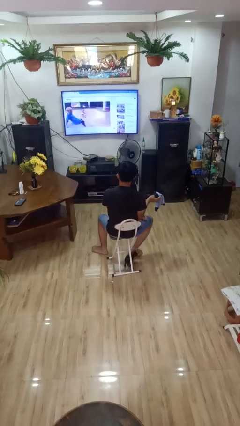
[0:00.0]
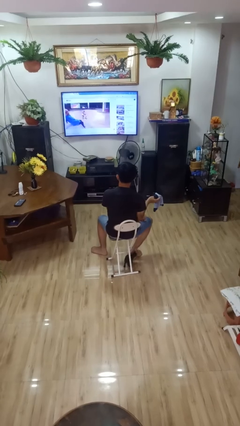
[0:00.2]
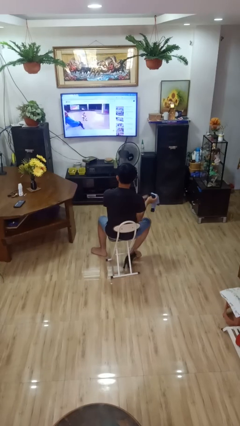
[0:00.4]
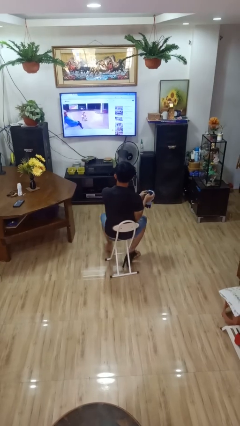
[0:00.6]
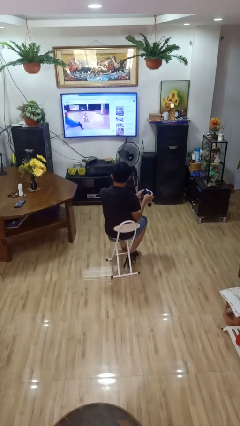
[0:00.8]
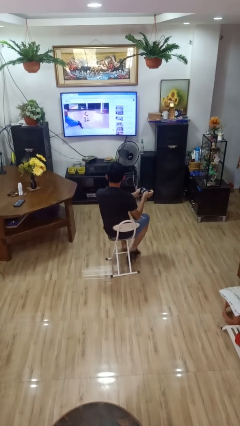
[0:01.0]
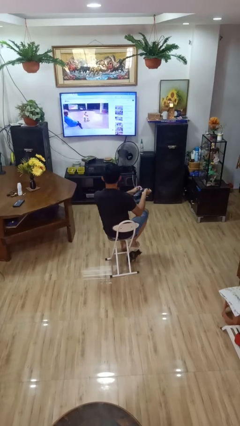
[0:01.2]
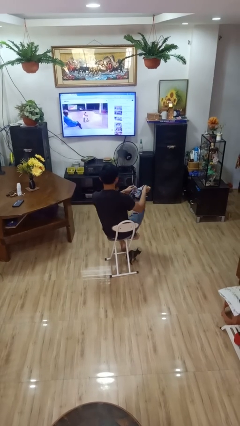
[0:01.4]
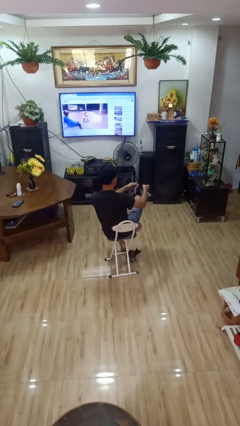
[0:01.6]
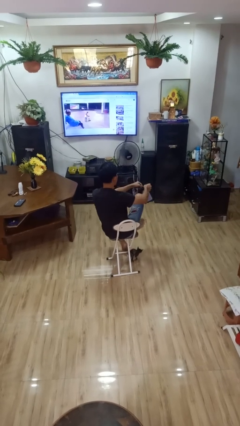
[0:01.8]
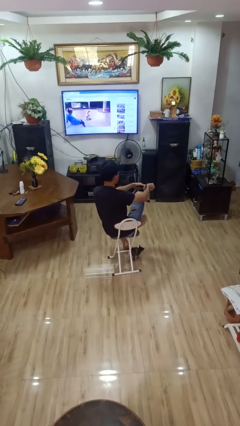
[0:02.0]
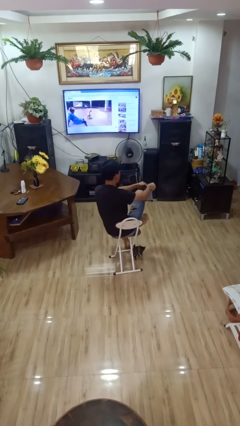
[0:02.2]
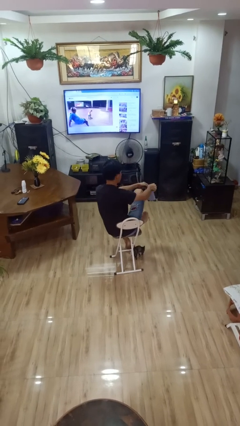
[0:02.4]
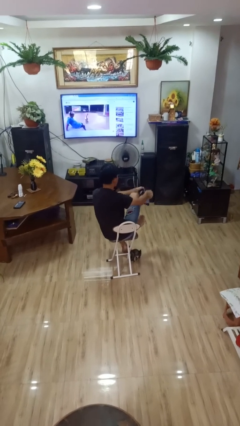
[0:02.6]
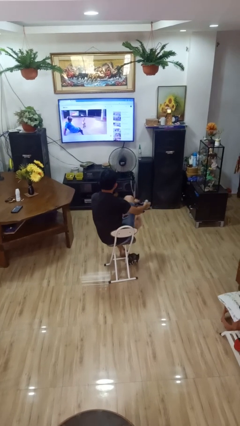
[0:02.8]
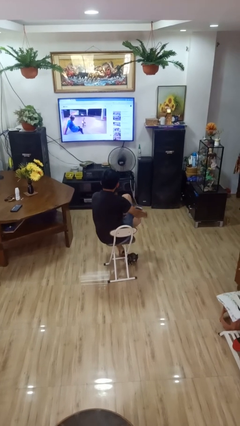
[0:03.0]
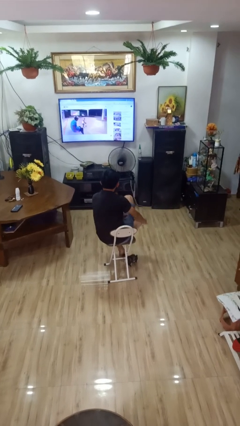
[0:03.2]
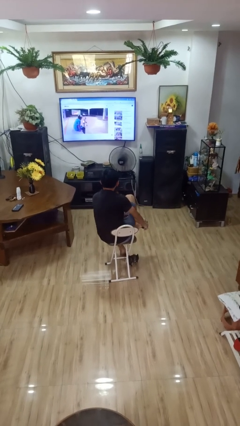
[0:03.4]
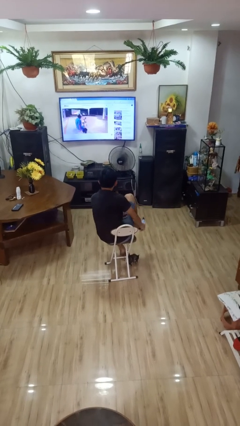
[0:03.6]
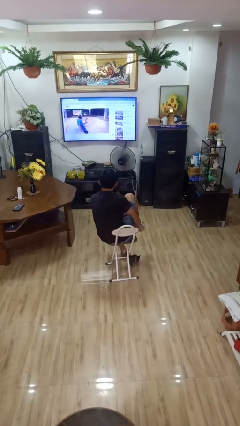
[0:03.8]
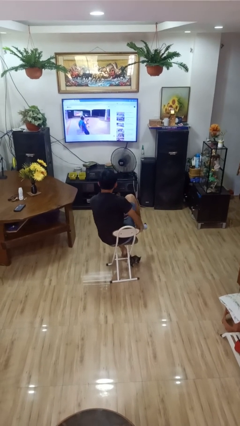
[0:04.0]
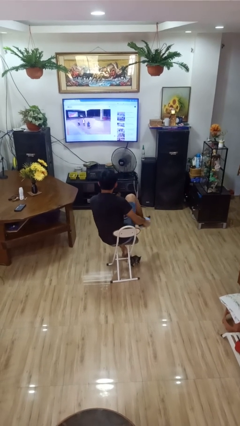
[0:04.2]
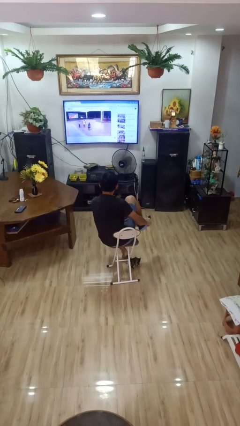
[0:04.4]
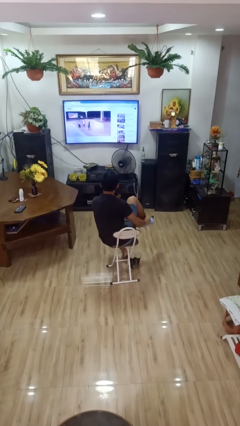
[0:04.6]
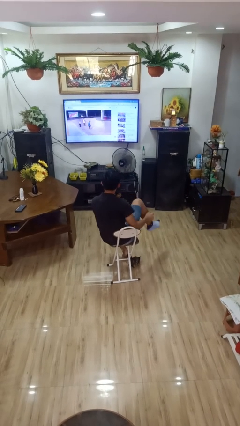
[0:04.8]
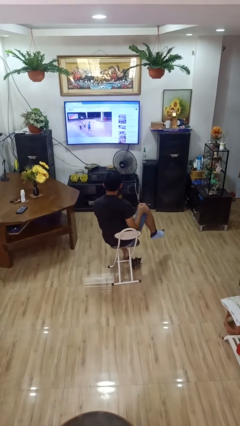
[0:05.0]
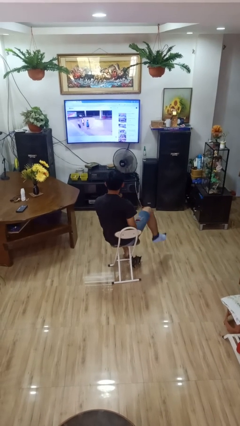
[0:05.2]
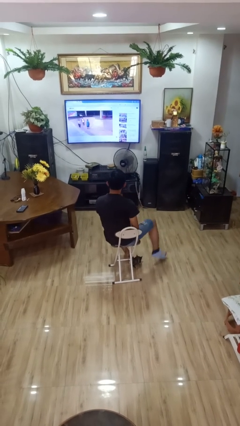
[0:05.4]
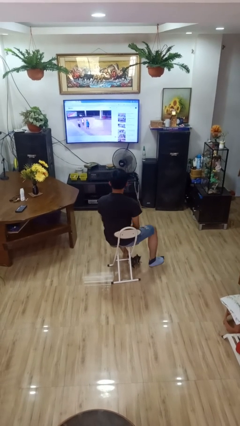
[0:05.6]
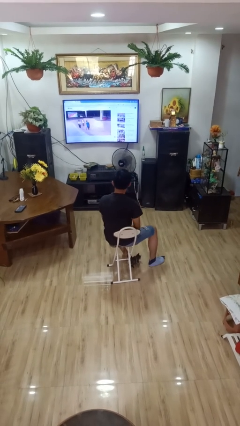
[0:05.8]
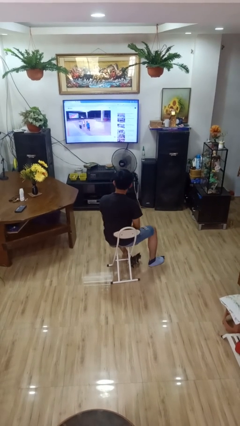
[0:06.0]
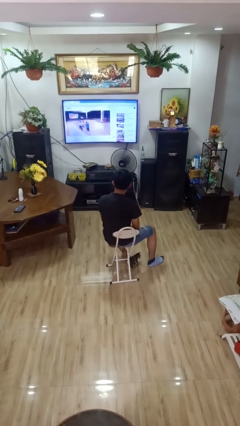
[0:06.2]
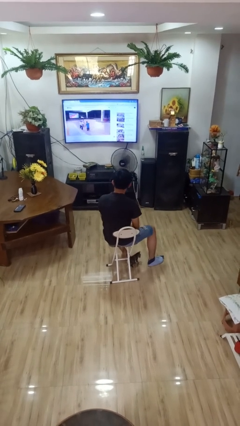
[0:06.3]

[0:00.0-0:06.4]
person puts on socks

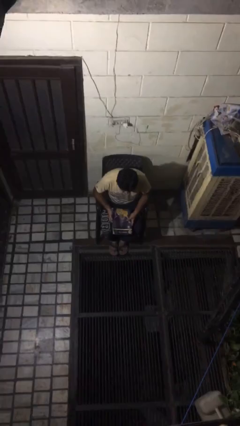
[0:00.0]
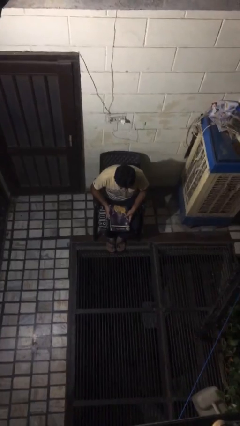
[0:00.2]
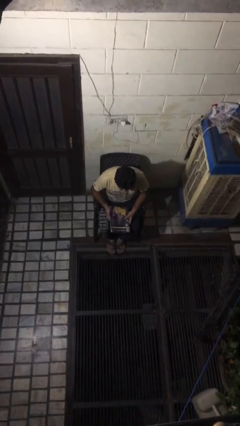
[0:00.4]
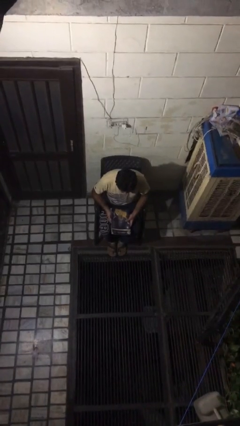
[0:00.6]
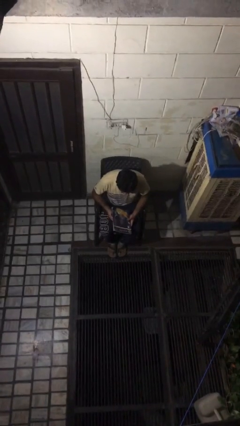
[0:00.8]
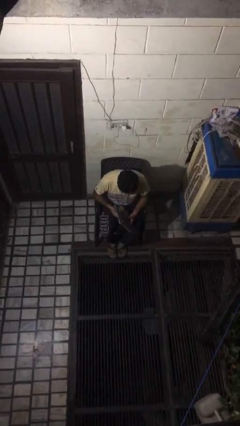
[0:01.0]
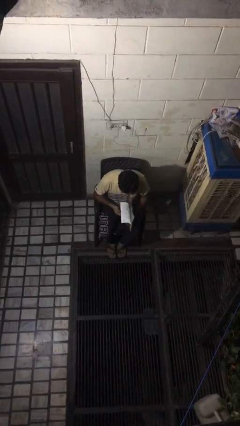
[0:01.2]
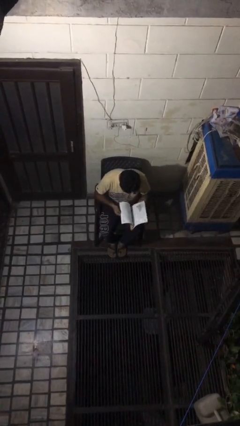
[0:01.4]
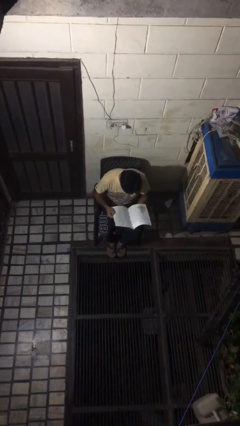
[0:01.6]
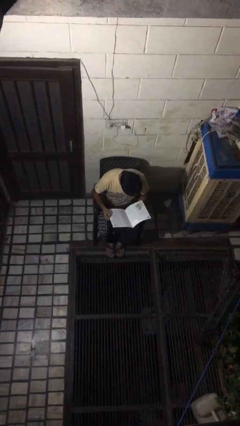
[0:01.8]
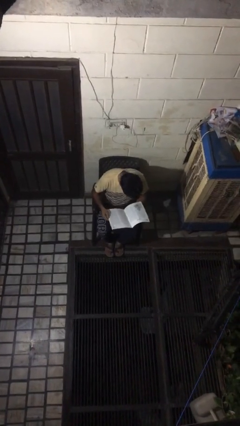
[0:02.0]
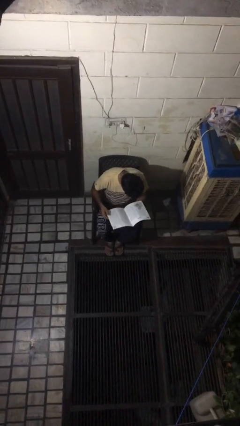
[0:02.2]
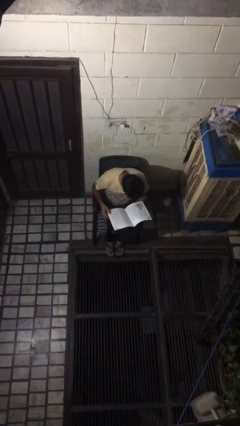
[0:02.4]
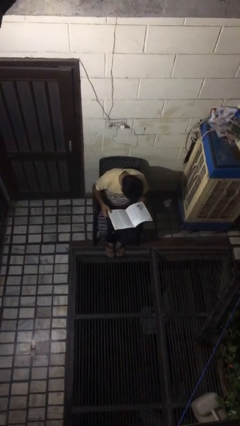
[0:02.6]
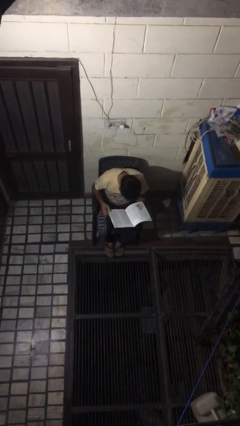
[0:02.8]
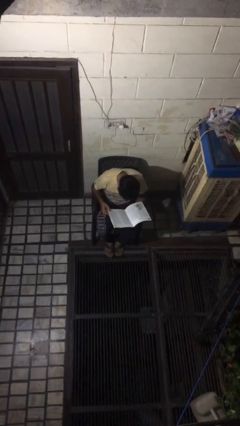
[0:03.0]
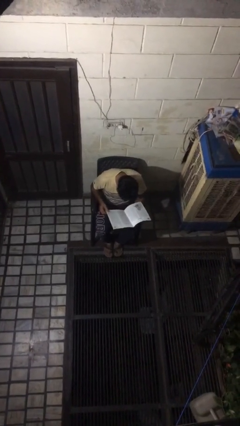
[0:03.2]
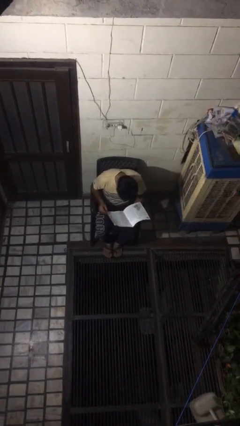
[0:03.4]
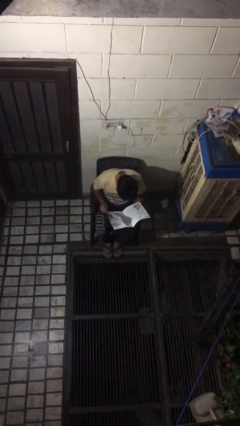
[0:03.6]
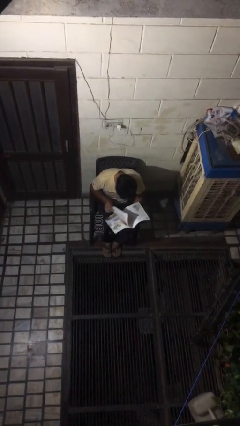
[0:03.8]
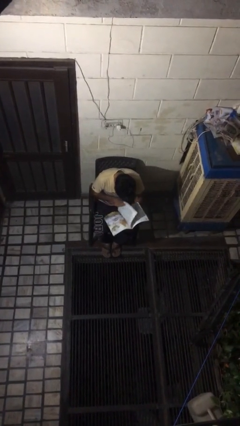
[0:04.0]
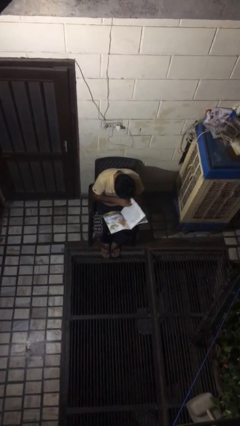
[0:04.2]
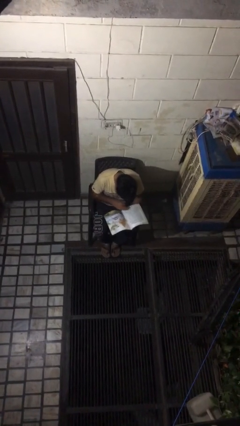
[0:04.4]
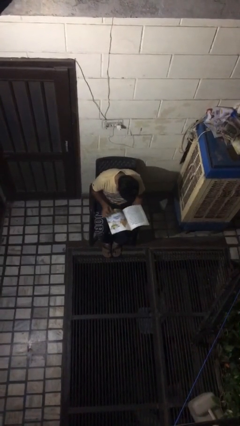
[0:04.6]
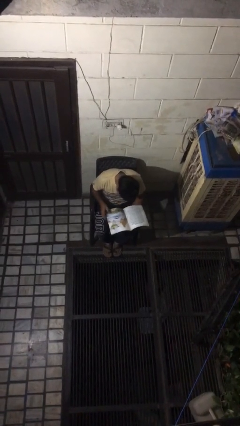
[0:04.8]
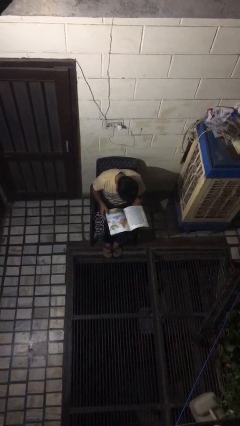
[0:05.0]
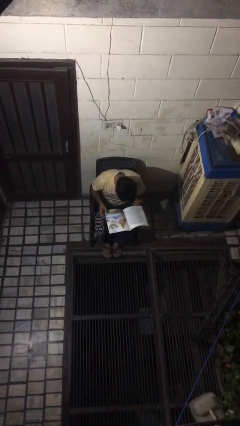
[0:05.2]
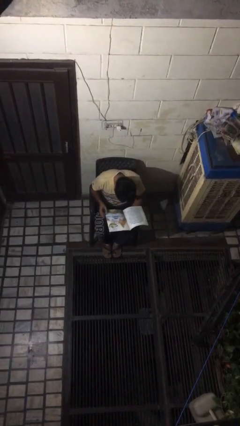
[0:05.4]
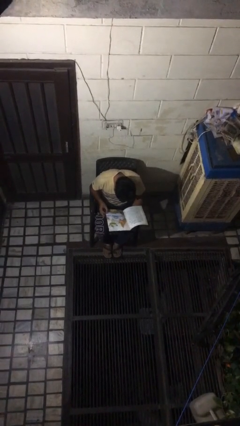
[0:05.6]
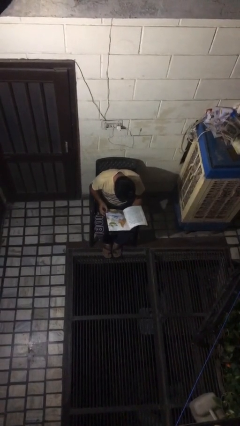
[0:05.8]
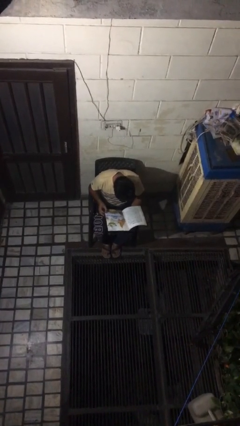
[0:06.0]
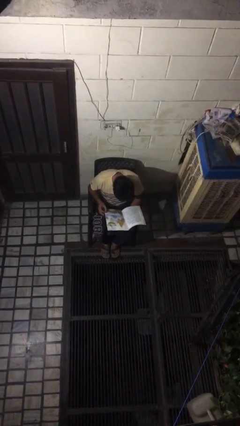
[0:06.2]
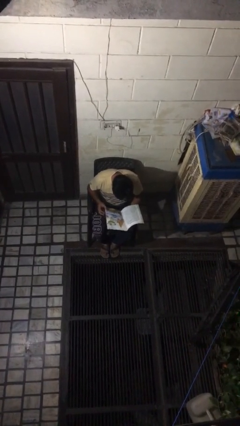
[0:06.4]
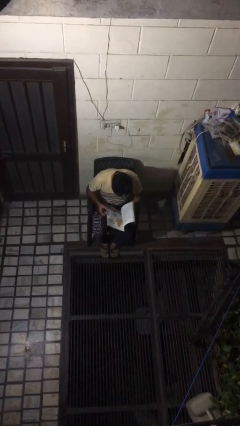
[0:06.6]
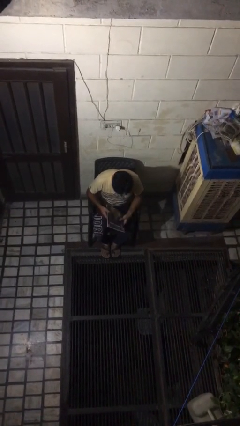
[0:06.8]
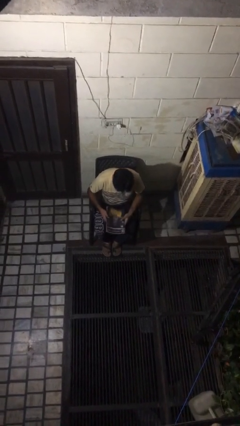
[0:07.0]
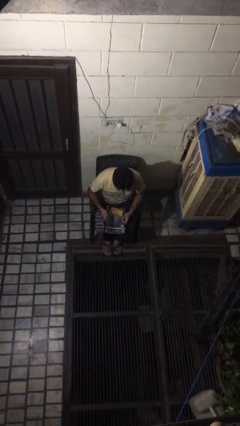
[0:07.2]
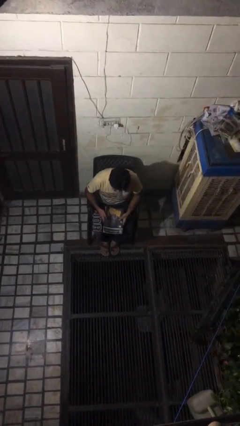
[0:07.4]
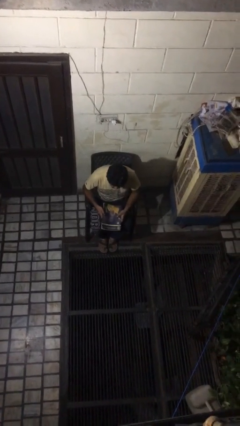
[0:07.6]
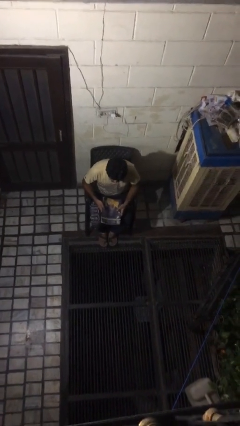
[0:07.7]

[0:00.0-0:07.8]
person reads magazine

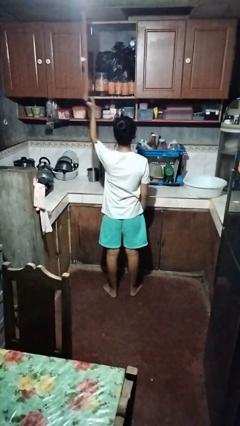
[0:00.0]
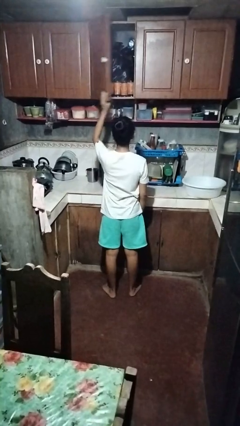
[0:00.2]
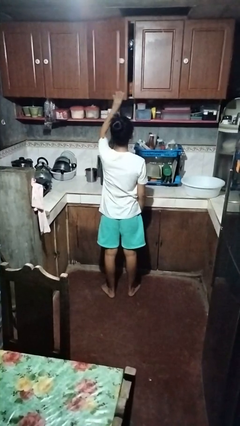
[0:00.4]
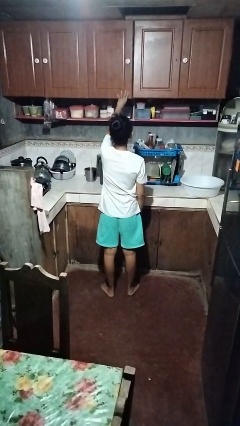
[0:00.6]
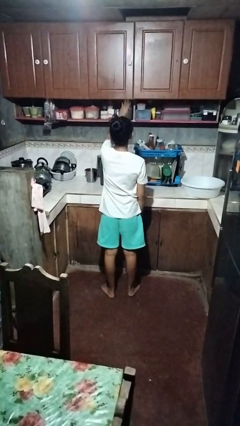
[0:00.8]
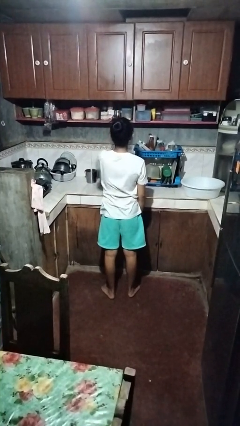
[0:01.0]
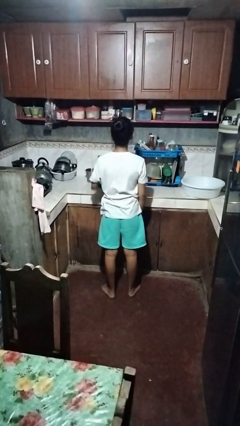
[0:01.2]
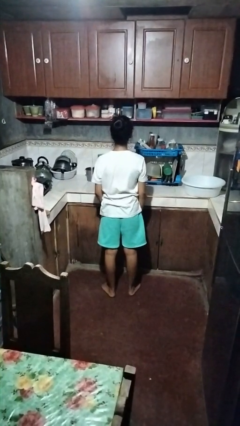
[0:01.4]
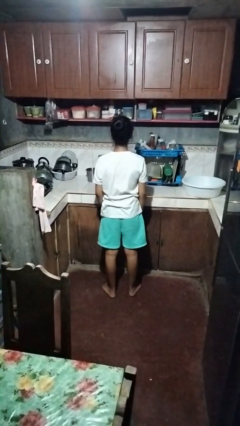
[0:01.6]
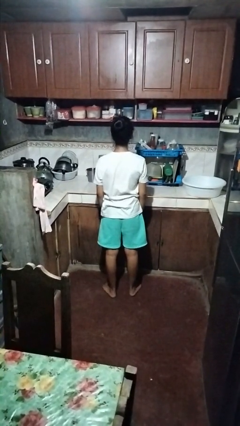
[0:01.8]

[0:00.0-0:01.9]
person closes cabinet

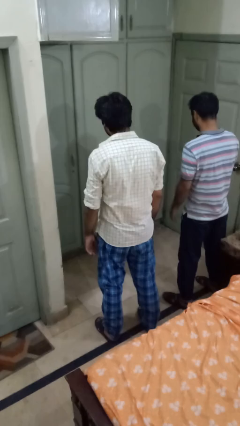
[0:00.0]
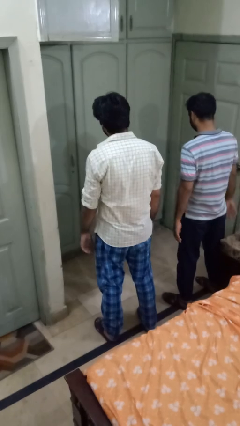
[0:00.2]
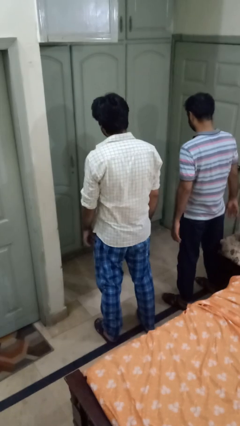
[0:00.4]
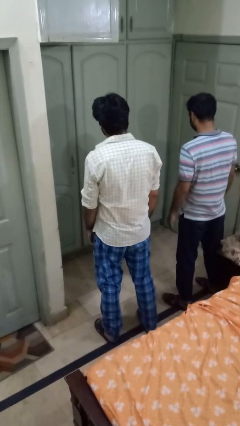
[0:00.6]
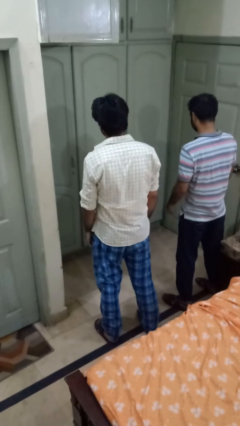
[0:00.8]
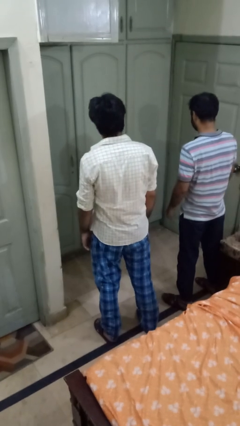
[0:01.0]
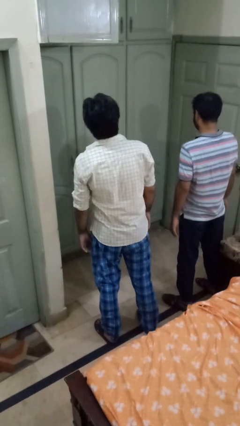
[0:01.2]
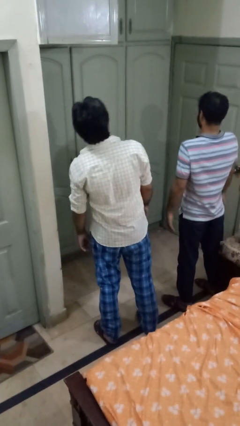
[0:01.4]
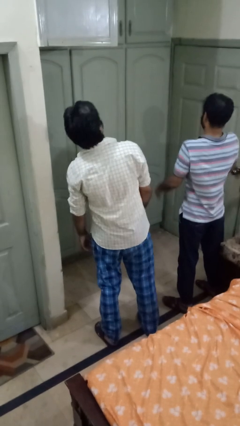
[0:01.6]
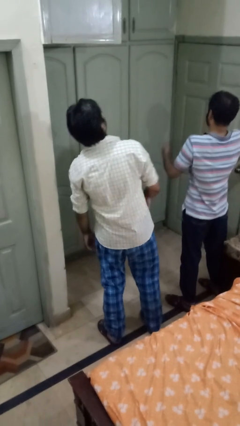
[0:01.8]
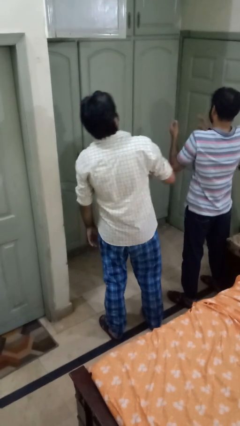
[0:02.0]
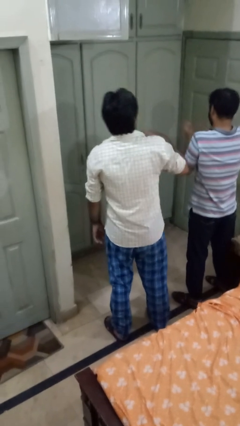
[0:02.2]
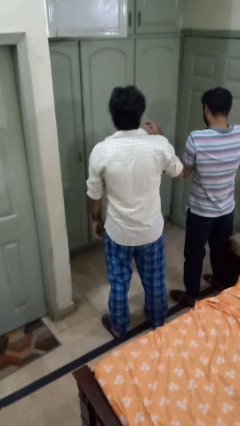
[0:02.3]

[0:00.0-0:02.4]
person laughs with person
